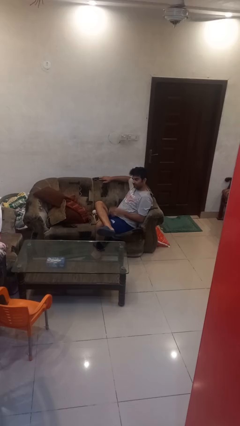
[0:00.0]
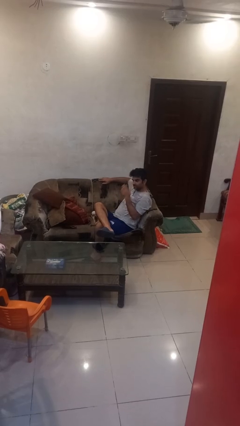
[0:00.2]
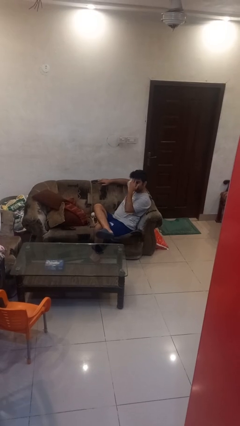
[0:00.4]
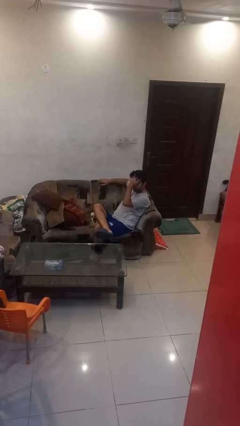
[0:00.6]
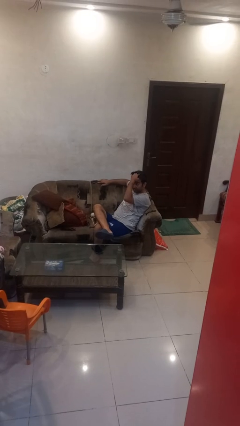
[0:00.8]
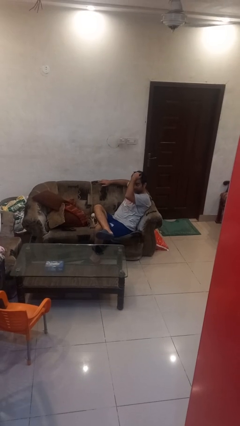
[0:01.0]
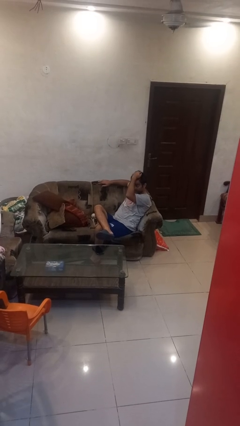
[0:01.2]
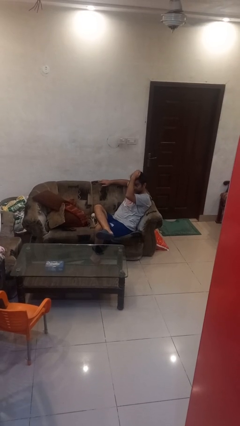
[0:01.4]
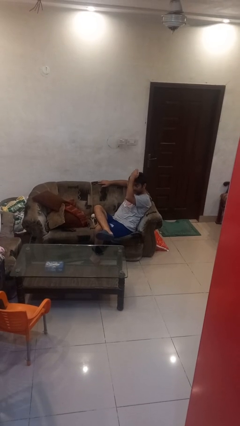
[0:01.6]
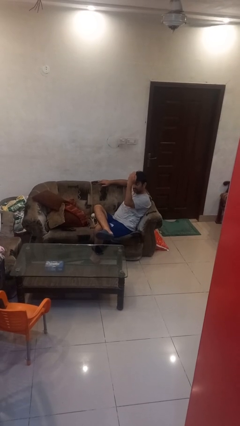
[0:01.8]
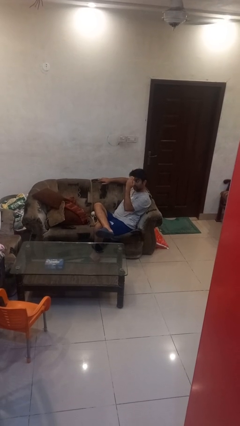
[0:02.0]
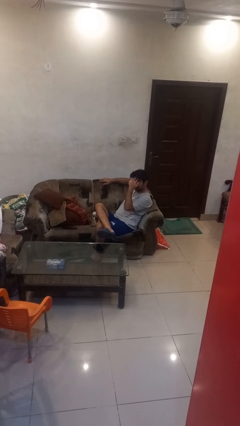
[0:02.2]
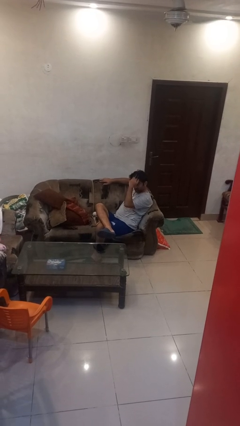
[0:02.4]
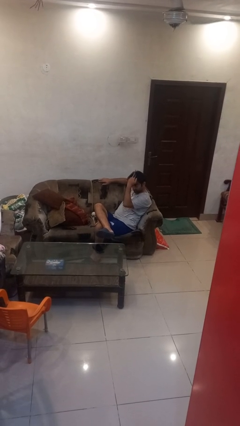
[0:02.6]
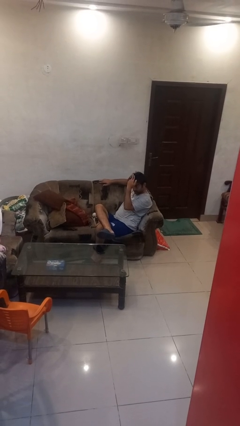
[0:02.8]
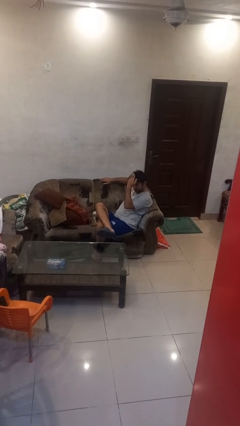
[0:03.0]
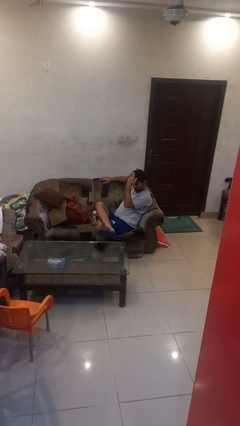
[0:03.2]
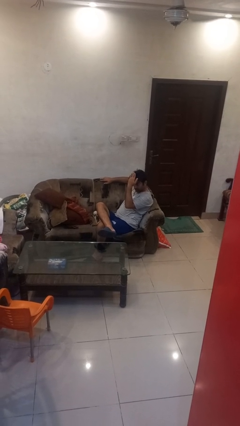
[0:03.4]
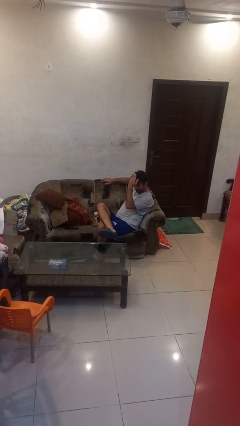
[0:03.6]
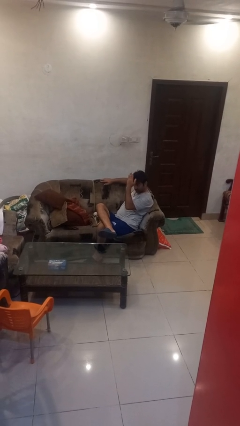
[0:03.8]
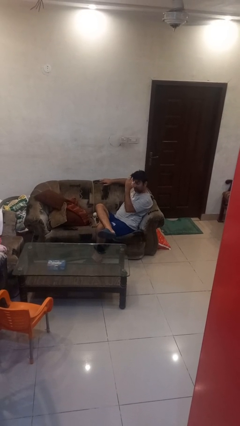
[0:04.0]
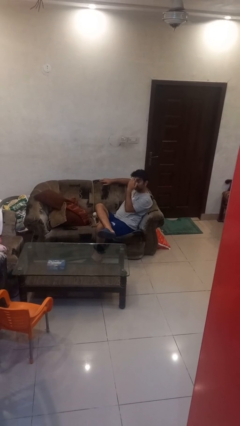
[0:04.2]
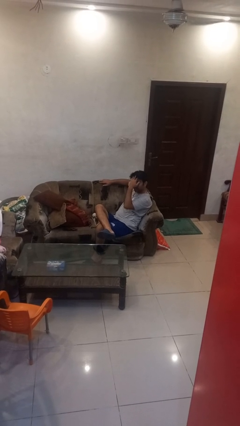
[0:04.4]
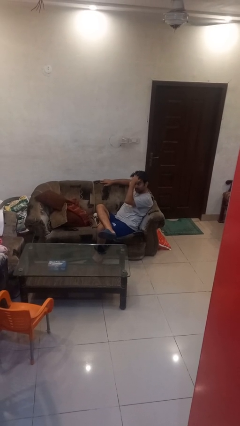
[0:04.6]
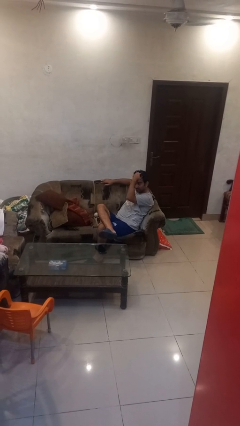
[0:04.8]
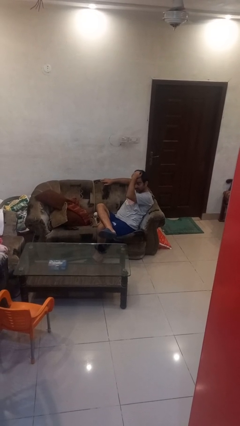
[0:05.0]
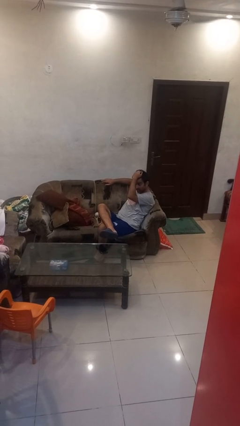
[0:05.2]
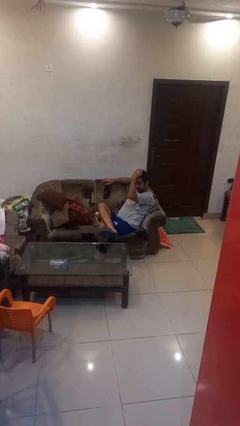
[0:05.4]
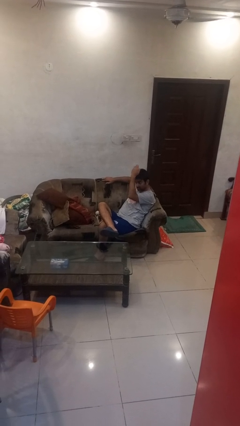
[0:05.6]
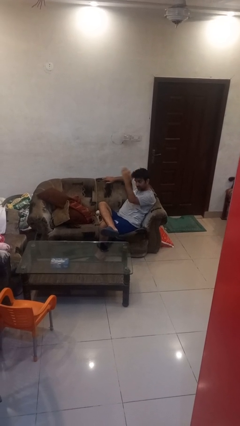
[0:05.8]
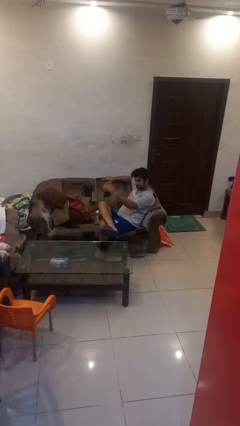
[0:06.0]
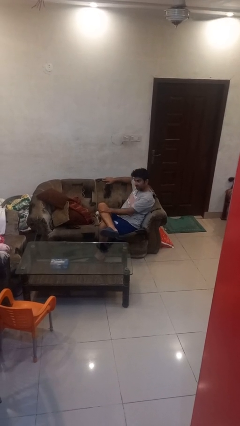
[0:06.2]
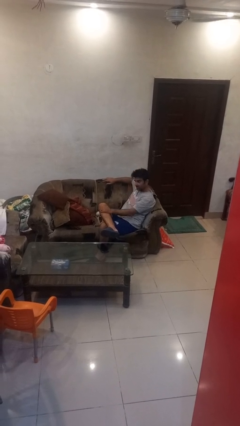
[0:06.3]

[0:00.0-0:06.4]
person strokes hair

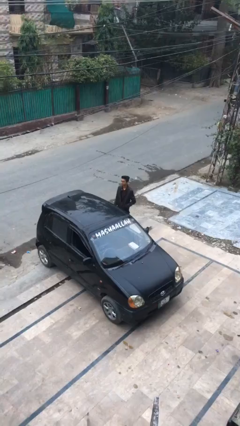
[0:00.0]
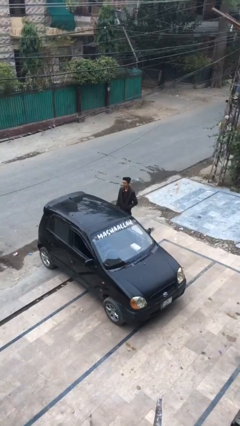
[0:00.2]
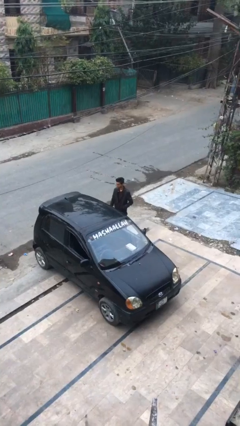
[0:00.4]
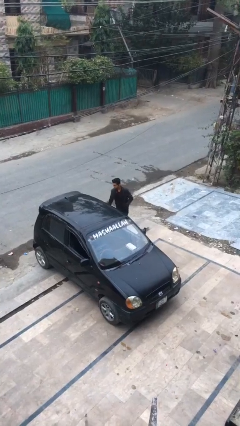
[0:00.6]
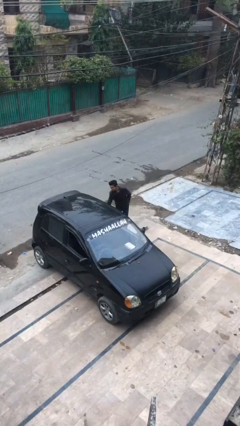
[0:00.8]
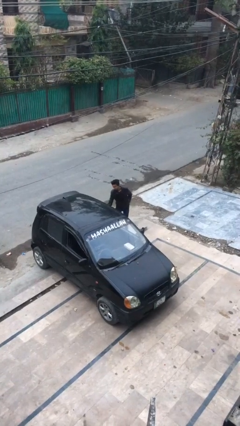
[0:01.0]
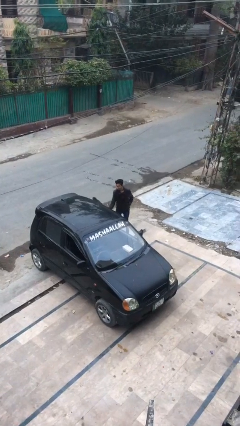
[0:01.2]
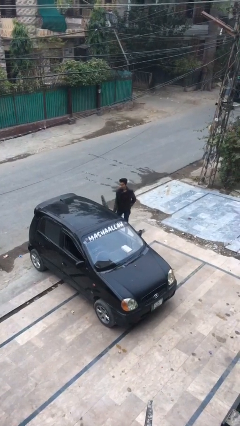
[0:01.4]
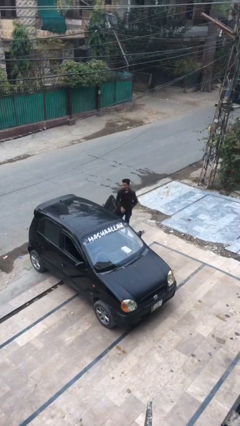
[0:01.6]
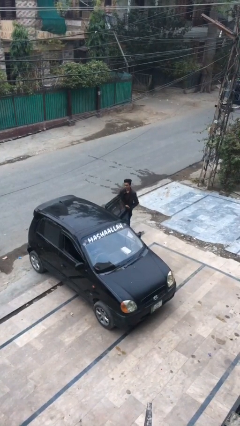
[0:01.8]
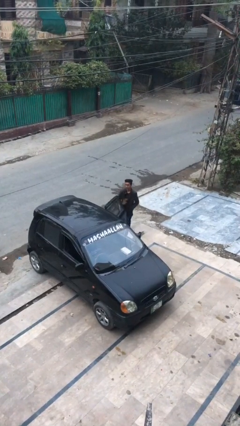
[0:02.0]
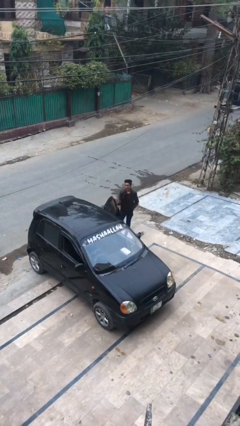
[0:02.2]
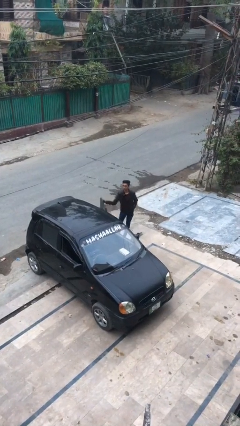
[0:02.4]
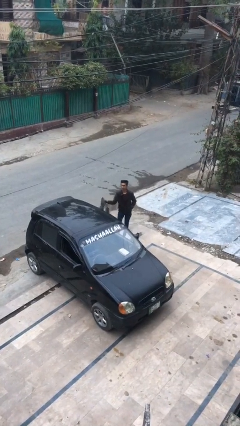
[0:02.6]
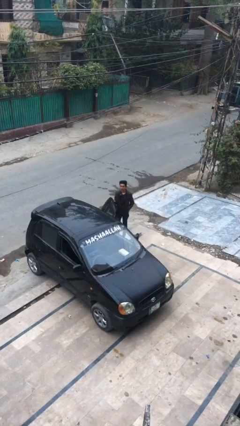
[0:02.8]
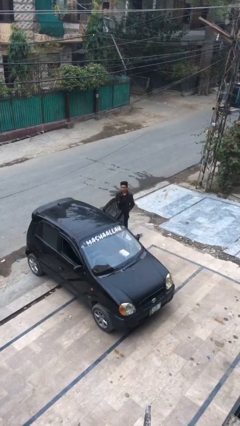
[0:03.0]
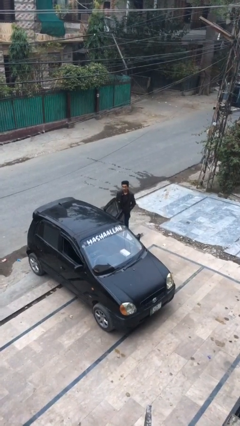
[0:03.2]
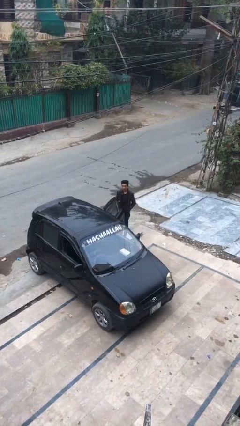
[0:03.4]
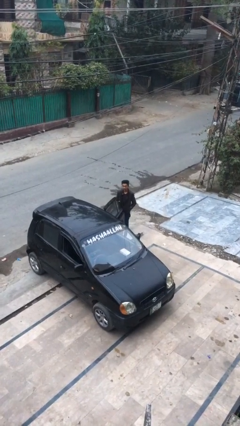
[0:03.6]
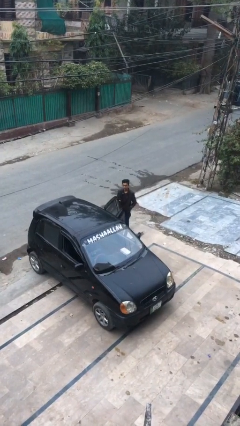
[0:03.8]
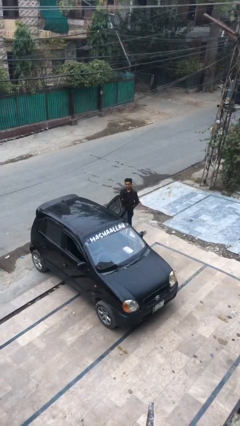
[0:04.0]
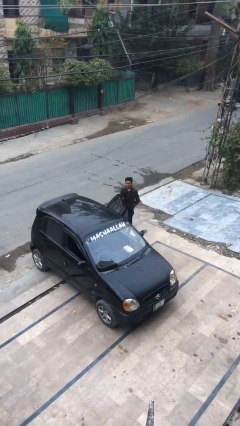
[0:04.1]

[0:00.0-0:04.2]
person opens car door

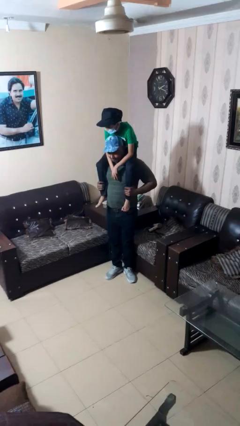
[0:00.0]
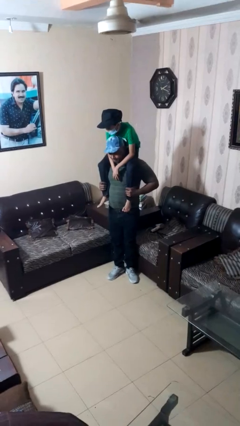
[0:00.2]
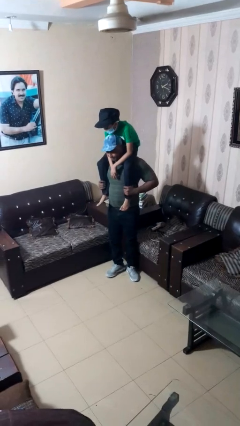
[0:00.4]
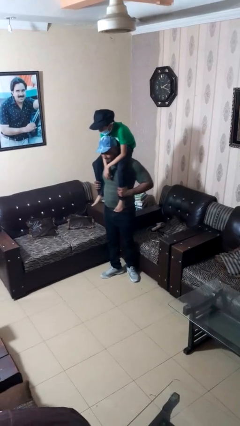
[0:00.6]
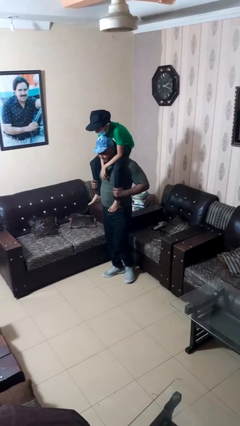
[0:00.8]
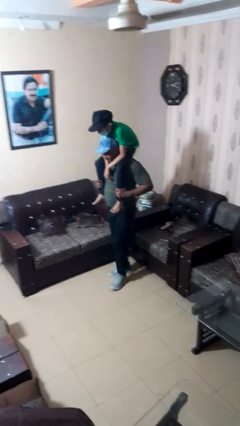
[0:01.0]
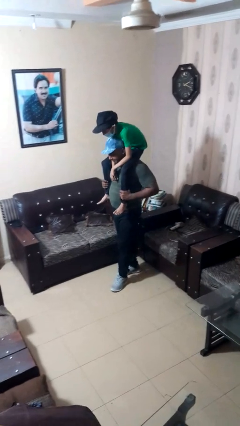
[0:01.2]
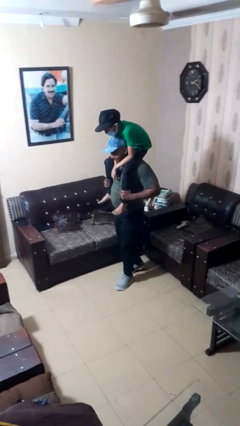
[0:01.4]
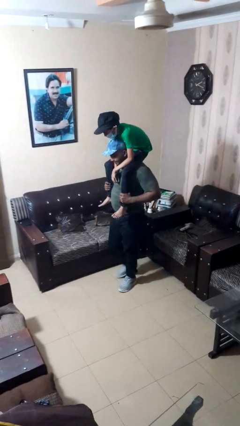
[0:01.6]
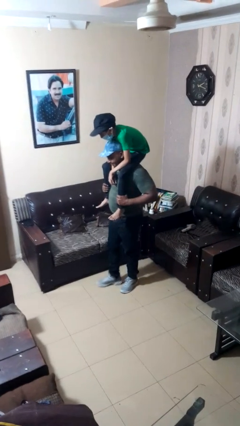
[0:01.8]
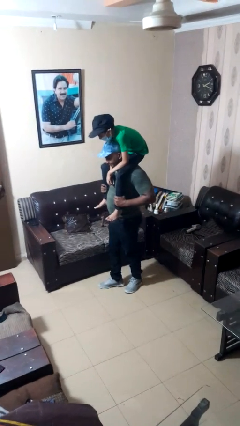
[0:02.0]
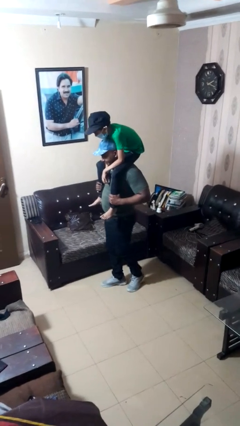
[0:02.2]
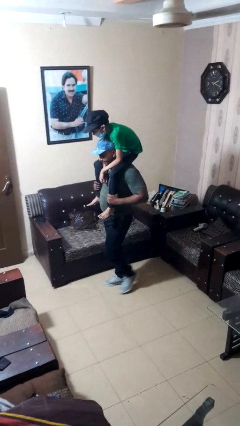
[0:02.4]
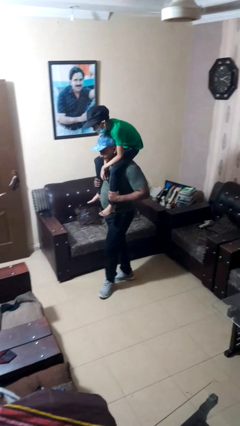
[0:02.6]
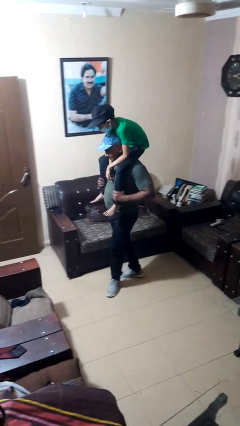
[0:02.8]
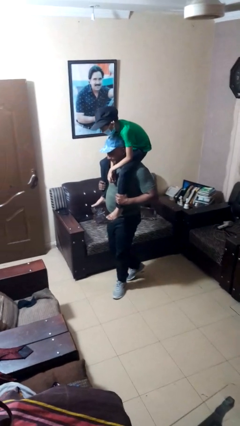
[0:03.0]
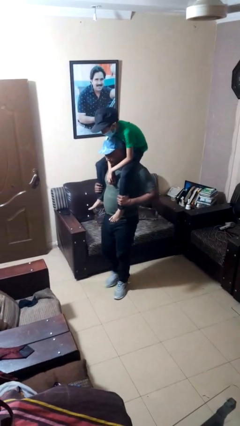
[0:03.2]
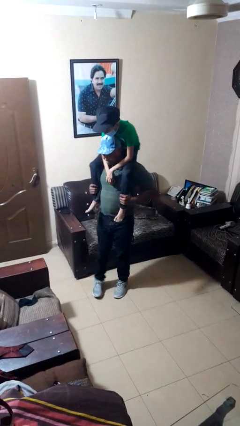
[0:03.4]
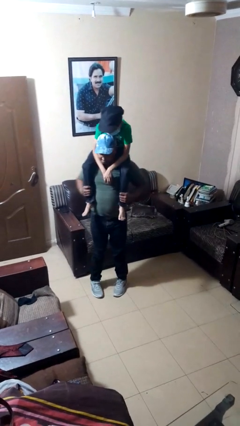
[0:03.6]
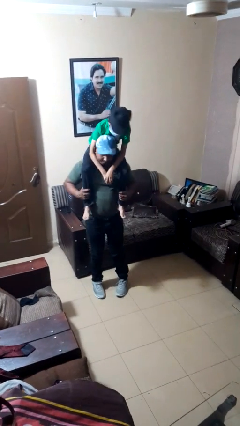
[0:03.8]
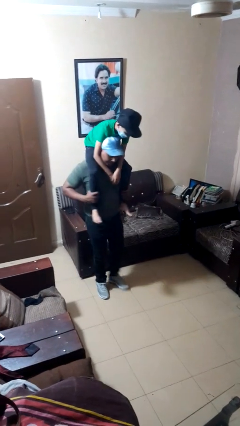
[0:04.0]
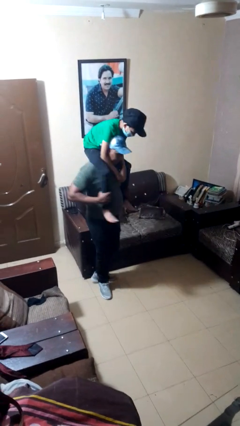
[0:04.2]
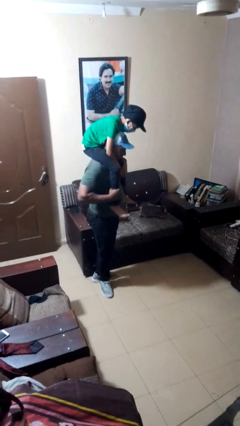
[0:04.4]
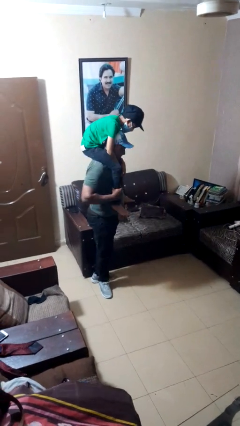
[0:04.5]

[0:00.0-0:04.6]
person carries person on shoulders

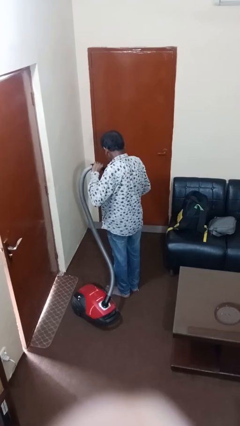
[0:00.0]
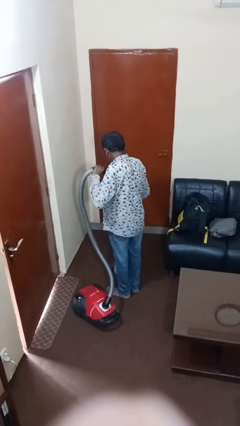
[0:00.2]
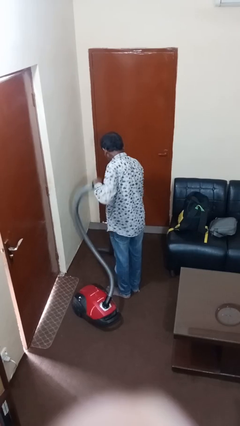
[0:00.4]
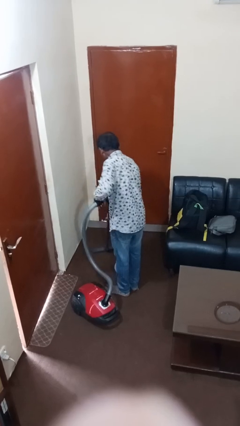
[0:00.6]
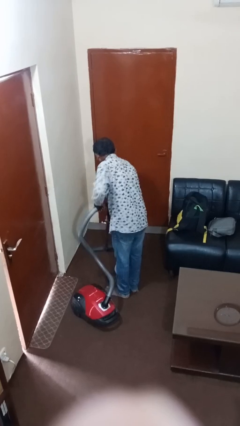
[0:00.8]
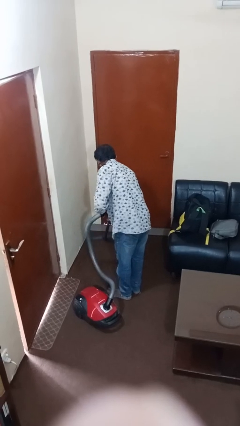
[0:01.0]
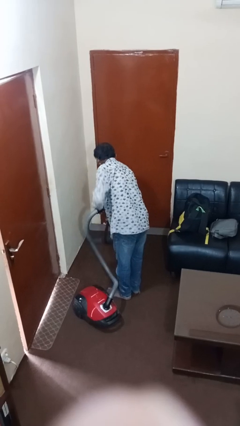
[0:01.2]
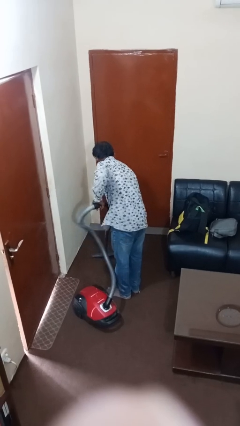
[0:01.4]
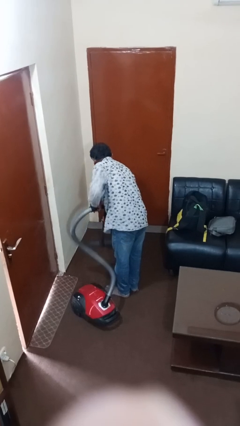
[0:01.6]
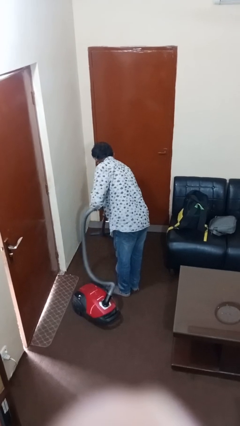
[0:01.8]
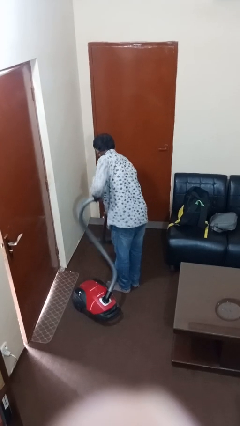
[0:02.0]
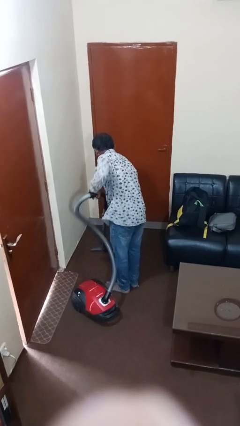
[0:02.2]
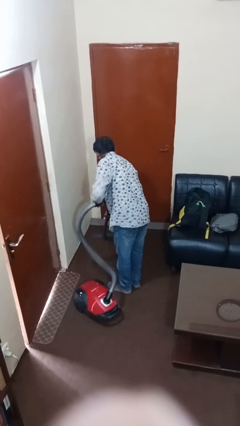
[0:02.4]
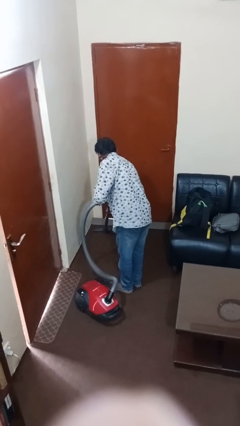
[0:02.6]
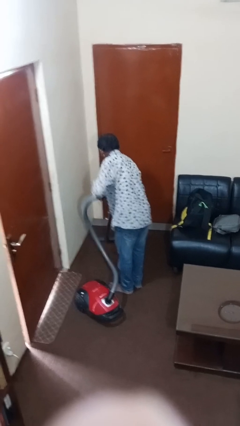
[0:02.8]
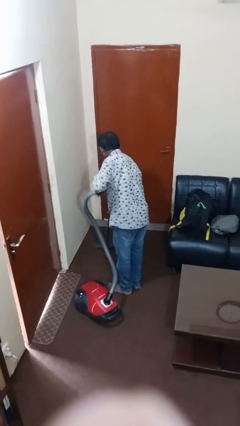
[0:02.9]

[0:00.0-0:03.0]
person vacuums carpet
